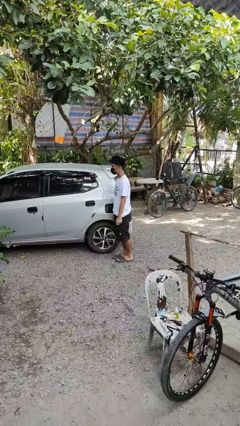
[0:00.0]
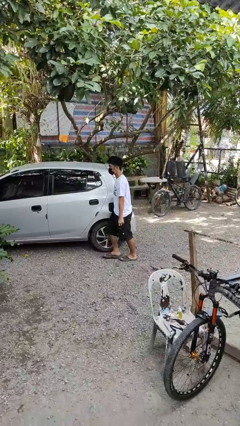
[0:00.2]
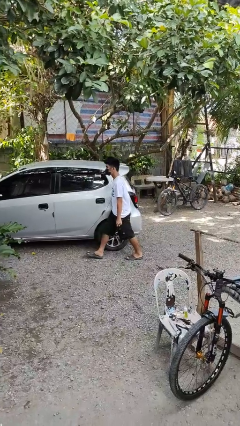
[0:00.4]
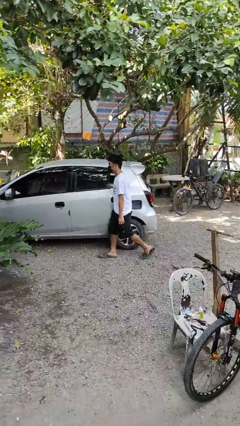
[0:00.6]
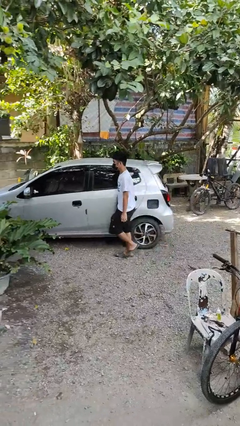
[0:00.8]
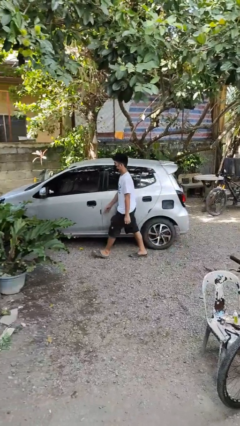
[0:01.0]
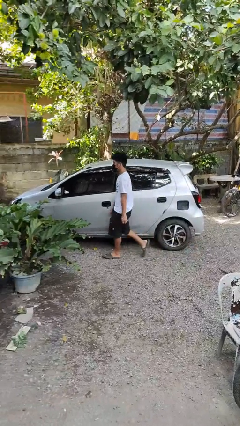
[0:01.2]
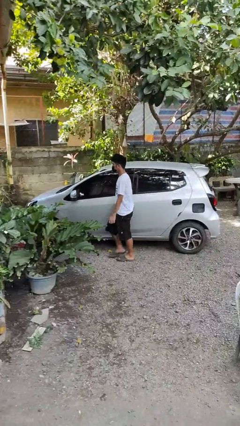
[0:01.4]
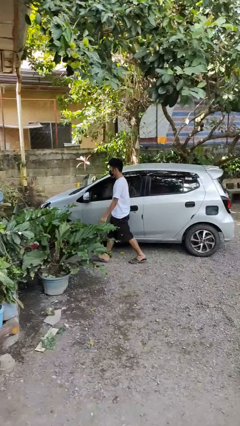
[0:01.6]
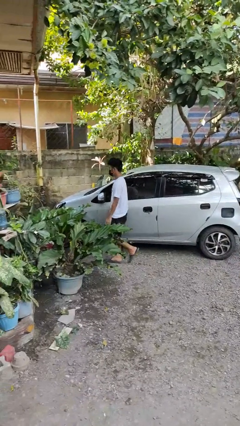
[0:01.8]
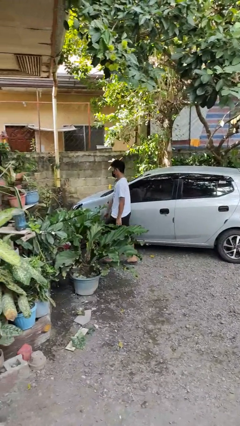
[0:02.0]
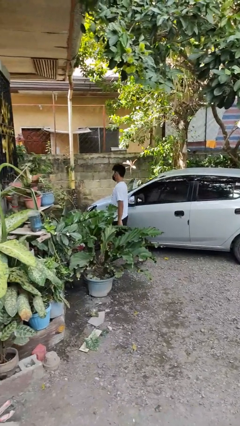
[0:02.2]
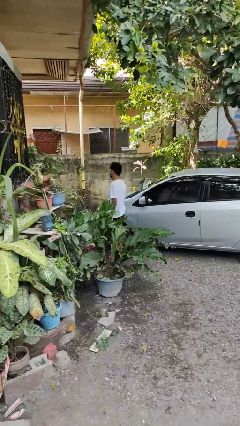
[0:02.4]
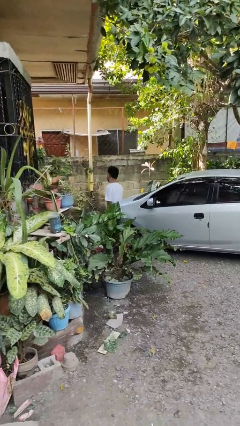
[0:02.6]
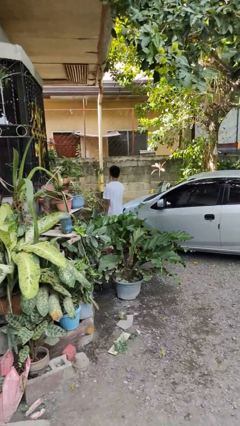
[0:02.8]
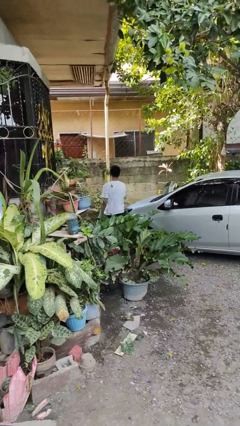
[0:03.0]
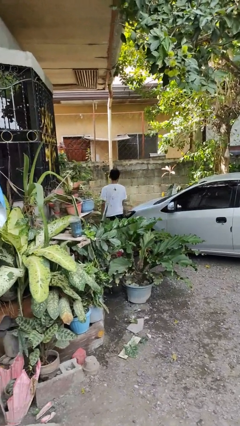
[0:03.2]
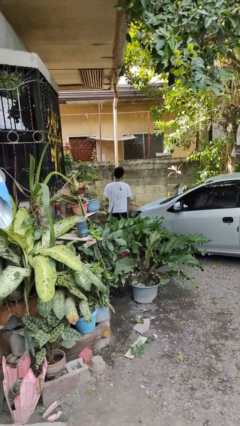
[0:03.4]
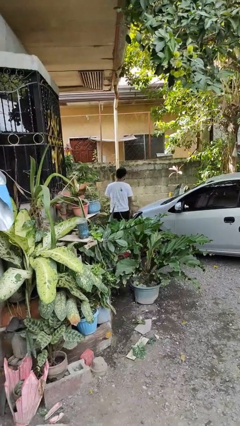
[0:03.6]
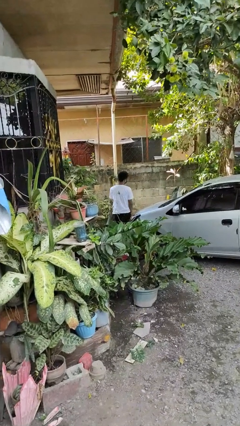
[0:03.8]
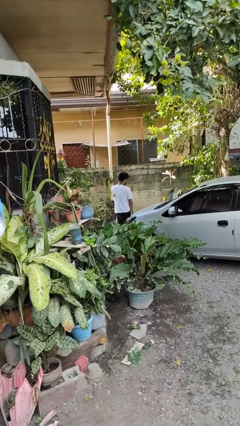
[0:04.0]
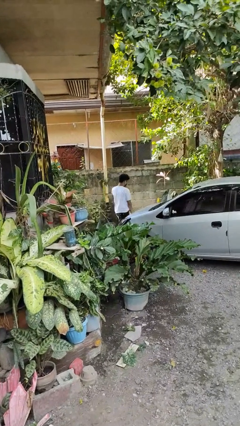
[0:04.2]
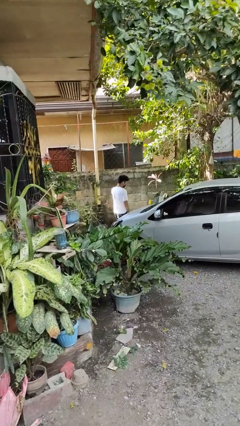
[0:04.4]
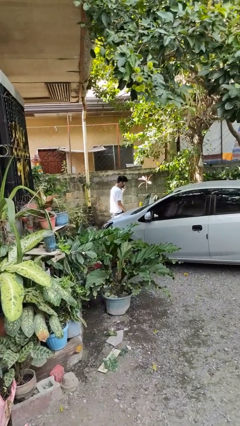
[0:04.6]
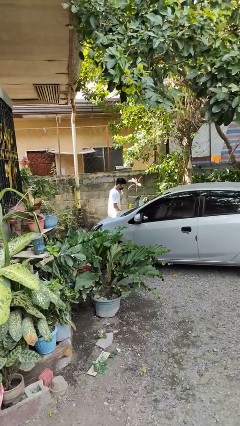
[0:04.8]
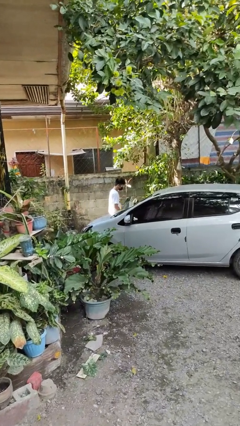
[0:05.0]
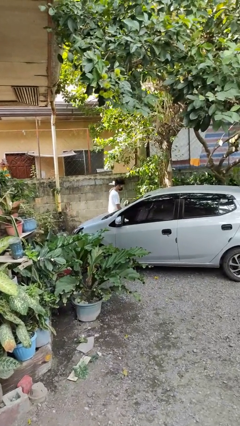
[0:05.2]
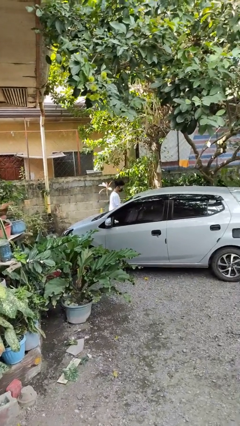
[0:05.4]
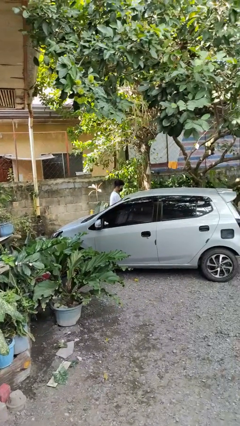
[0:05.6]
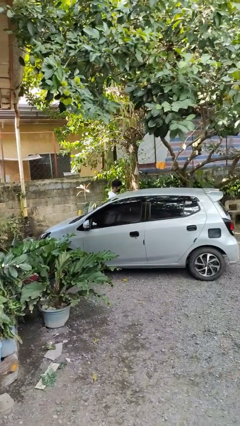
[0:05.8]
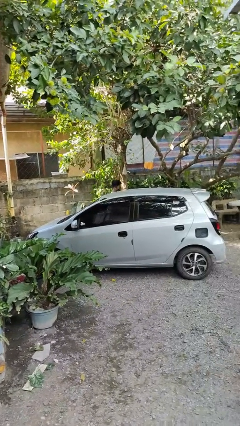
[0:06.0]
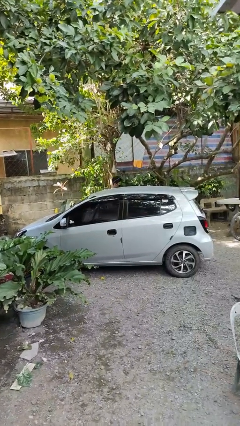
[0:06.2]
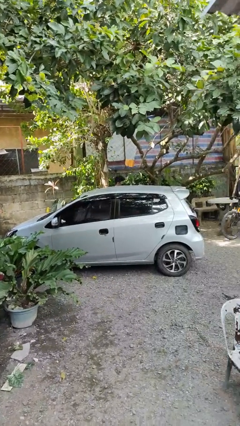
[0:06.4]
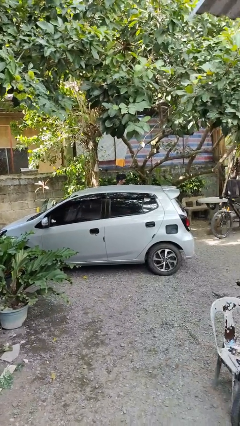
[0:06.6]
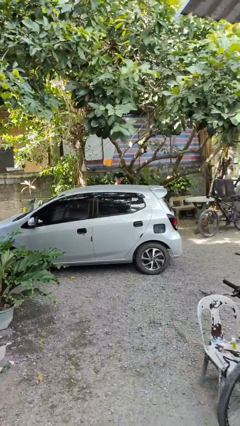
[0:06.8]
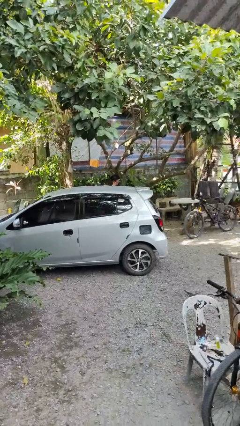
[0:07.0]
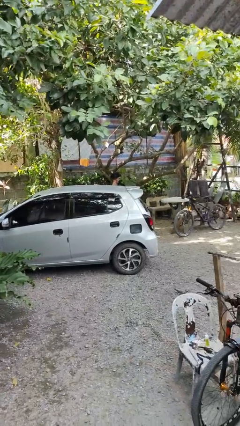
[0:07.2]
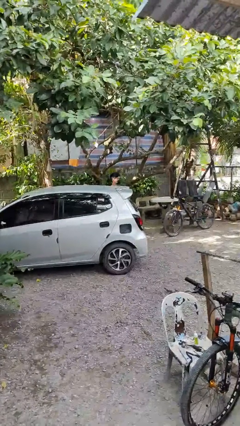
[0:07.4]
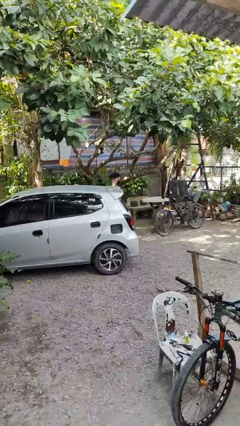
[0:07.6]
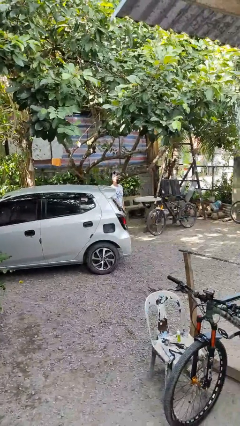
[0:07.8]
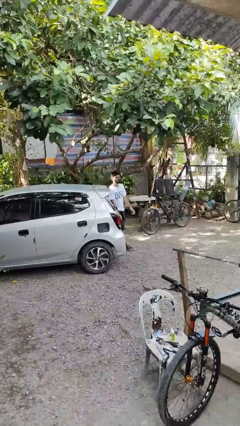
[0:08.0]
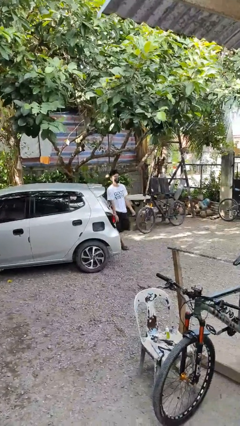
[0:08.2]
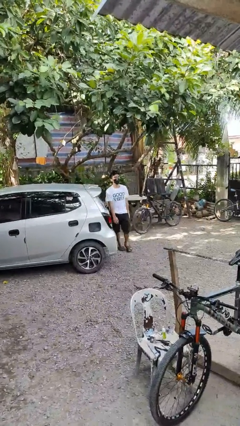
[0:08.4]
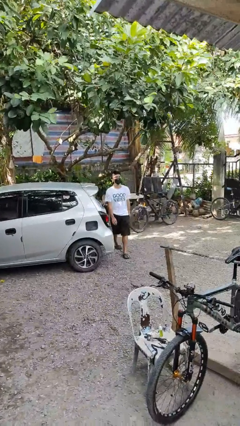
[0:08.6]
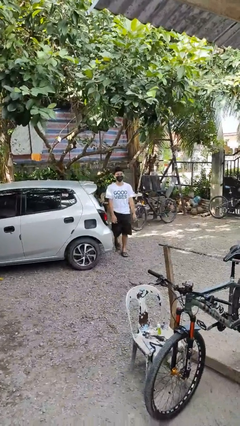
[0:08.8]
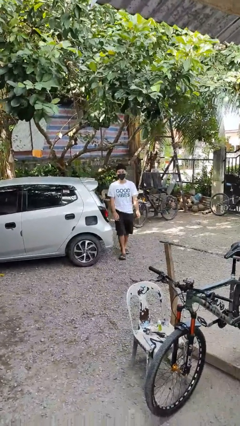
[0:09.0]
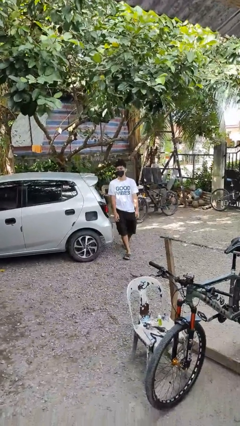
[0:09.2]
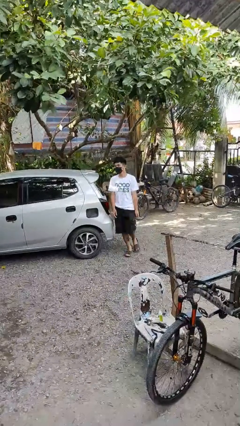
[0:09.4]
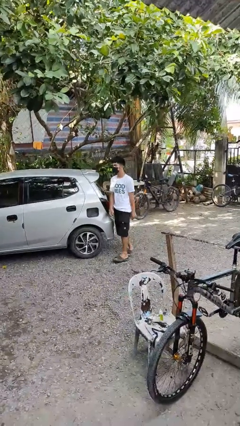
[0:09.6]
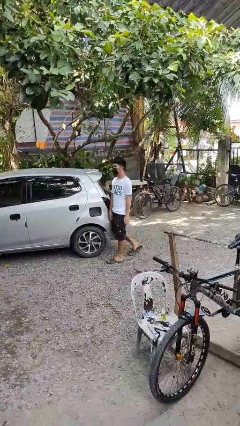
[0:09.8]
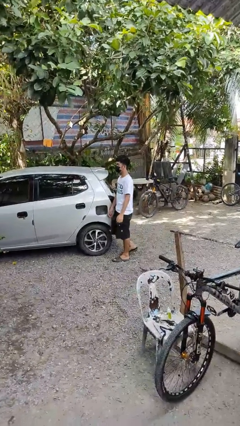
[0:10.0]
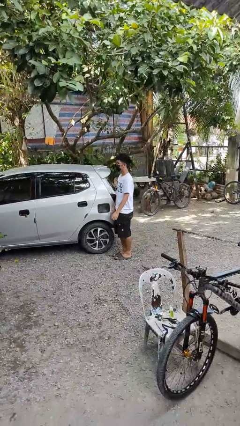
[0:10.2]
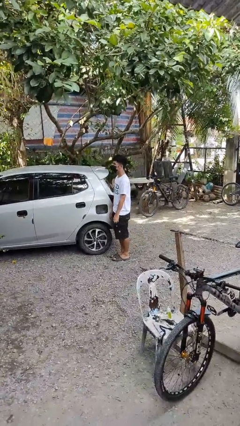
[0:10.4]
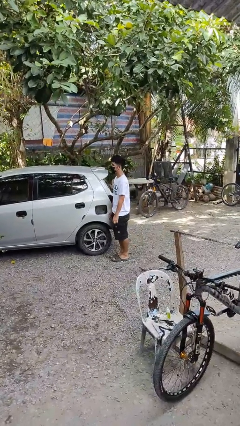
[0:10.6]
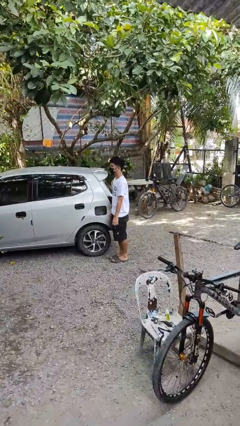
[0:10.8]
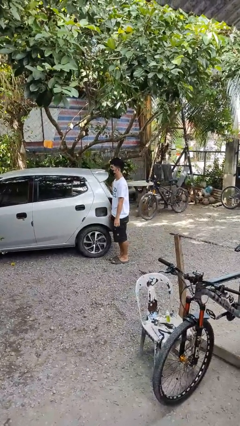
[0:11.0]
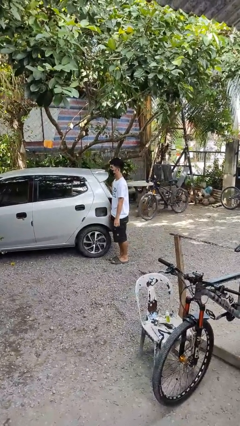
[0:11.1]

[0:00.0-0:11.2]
person walks around car

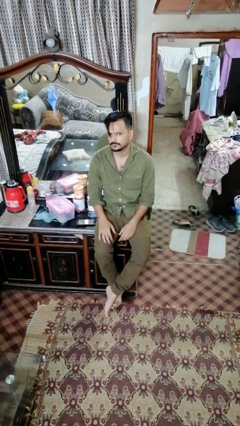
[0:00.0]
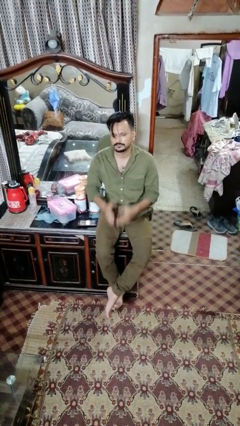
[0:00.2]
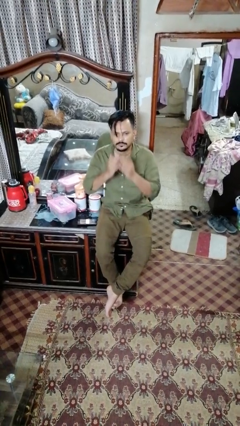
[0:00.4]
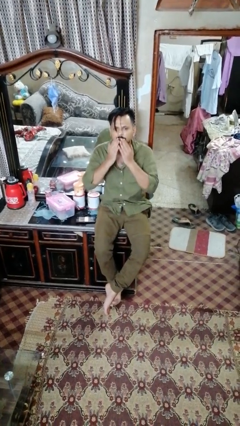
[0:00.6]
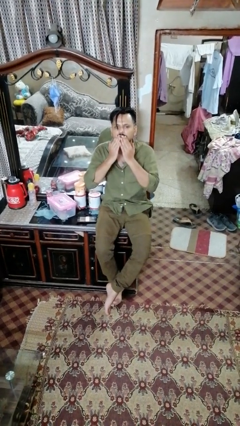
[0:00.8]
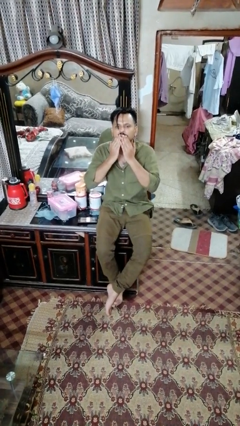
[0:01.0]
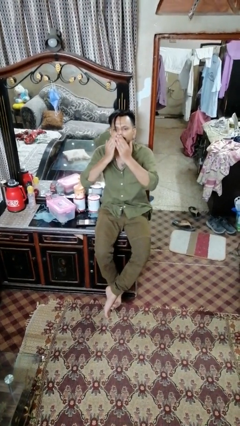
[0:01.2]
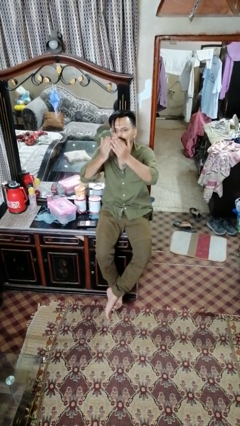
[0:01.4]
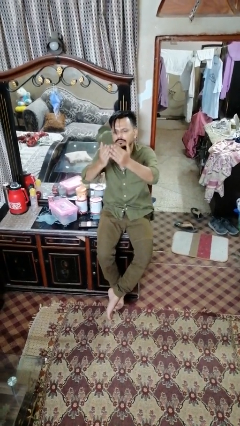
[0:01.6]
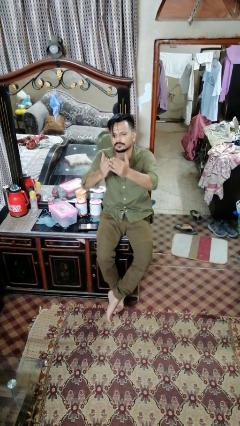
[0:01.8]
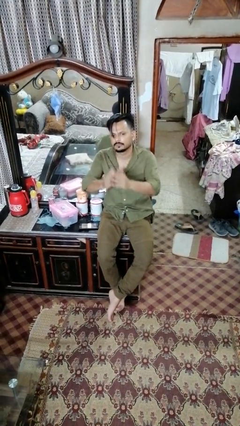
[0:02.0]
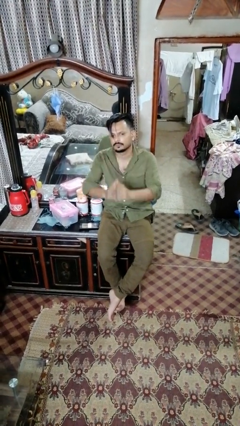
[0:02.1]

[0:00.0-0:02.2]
person gestures blow kiss

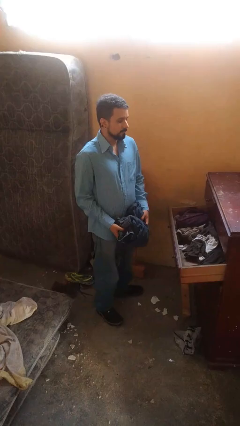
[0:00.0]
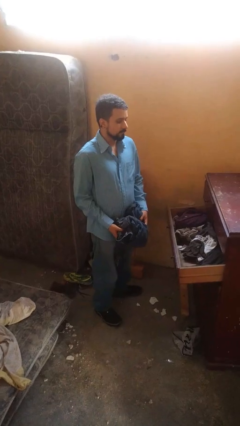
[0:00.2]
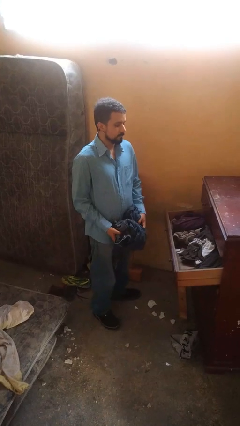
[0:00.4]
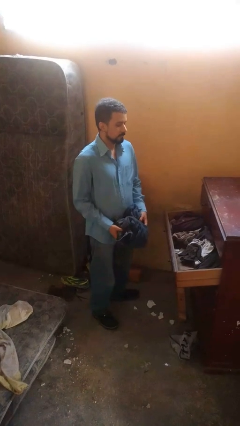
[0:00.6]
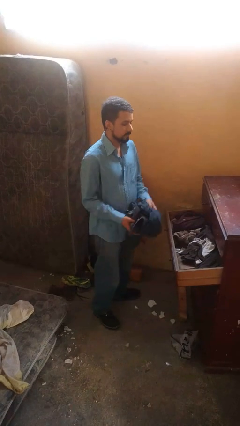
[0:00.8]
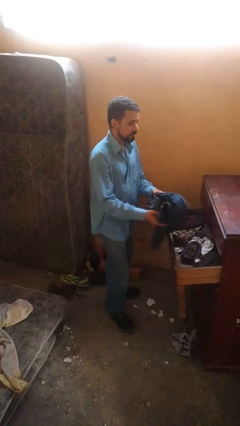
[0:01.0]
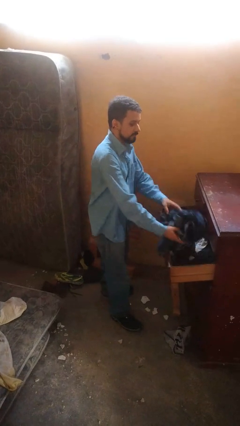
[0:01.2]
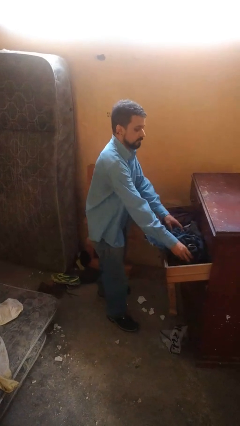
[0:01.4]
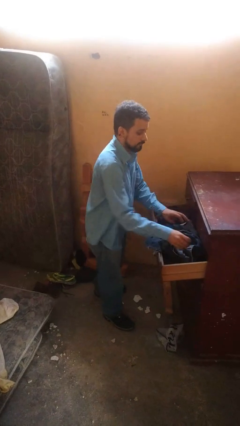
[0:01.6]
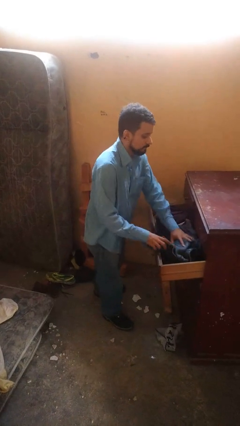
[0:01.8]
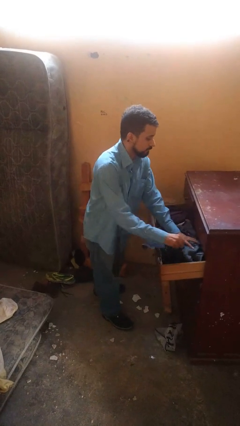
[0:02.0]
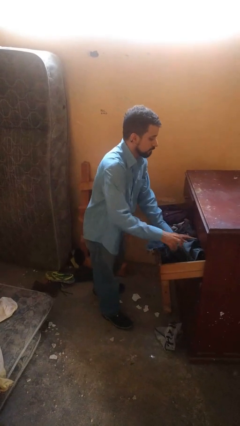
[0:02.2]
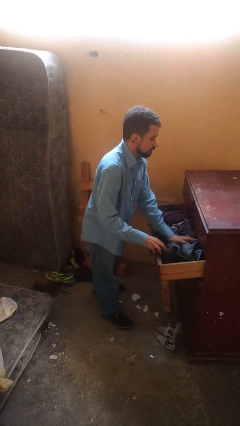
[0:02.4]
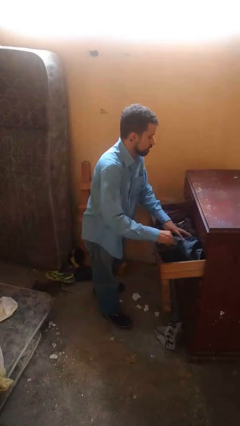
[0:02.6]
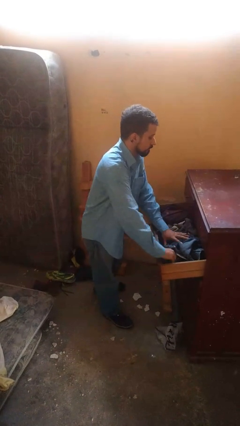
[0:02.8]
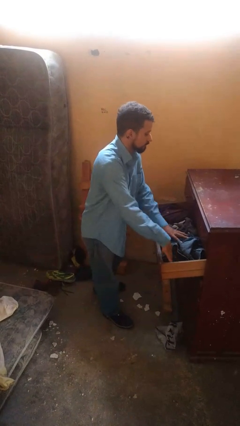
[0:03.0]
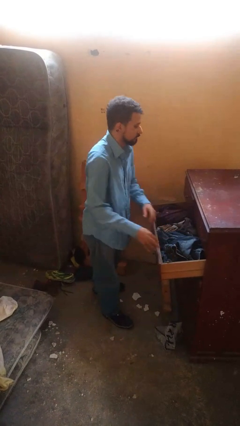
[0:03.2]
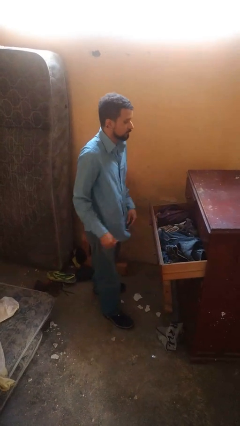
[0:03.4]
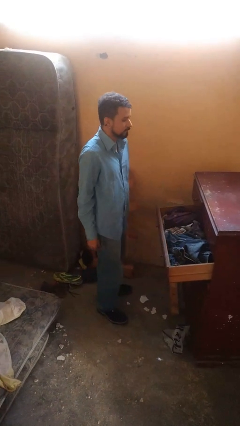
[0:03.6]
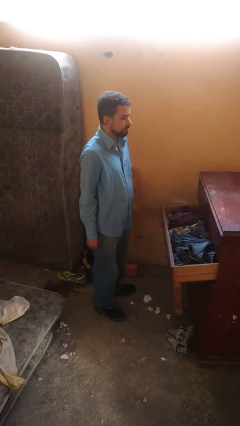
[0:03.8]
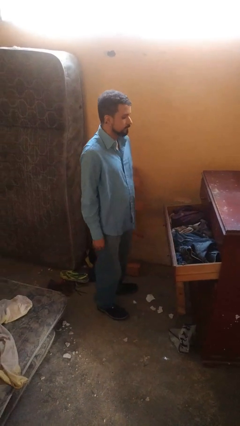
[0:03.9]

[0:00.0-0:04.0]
person puts clothes into dresser

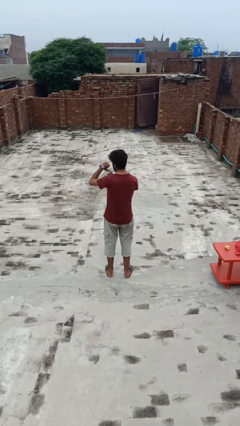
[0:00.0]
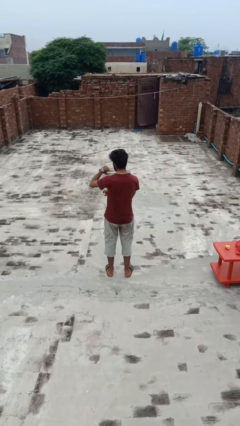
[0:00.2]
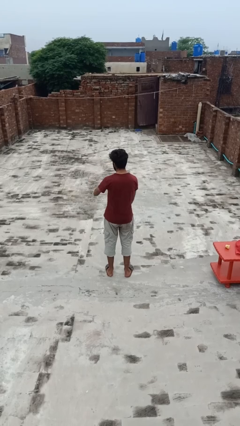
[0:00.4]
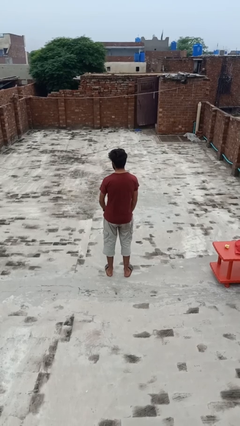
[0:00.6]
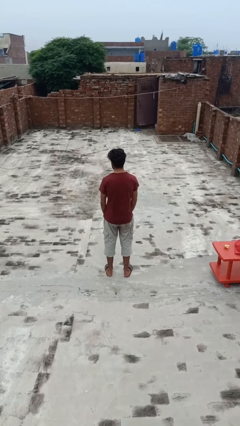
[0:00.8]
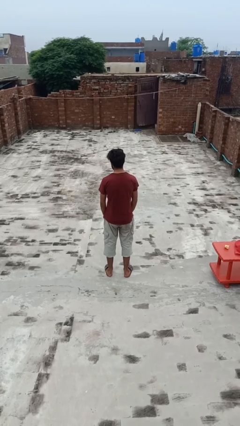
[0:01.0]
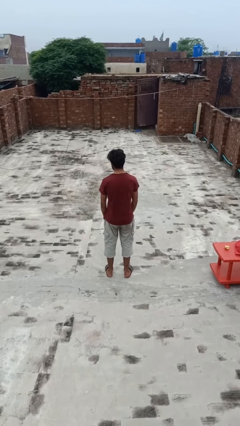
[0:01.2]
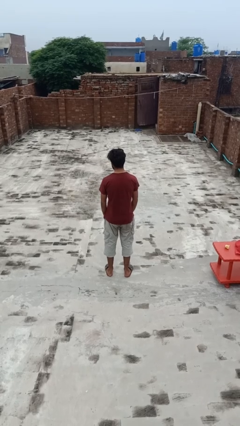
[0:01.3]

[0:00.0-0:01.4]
person gestures watch closely
